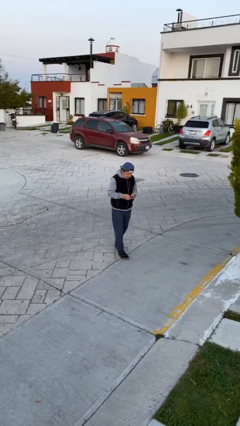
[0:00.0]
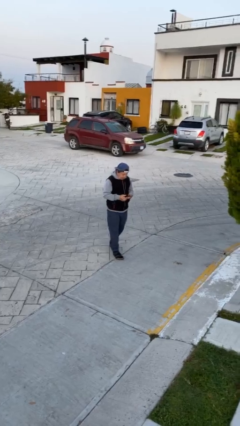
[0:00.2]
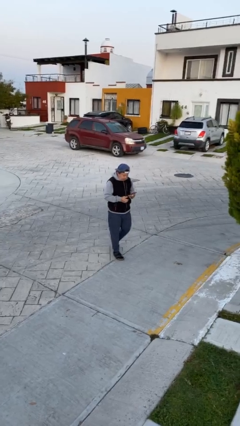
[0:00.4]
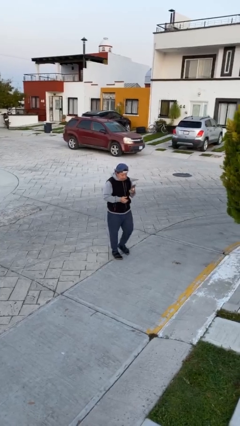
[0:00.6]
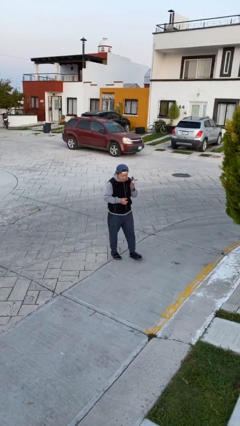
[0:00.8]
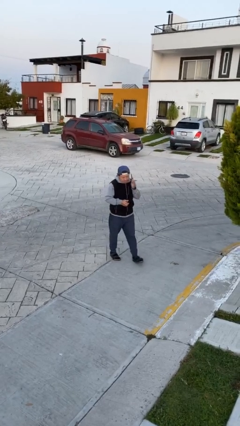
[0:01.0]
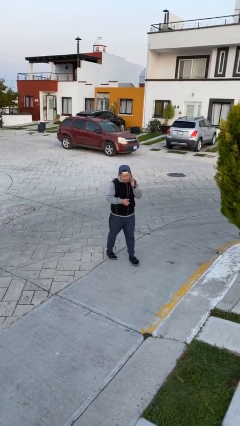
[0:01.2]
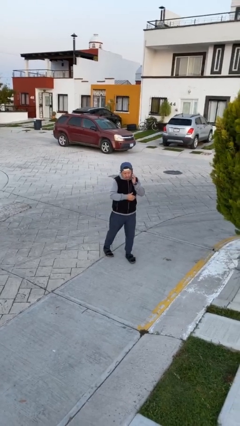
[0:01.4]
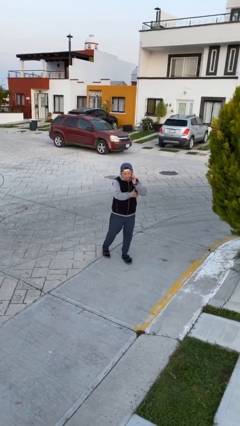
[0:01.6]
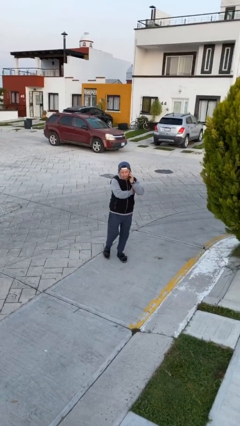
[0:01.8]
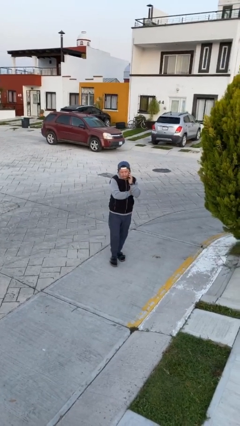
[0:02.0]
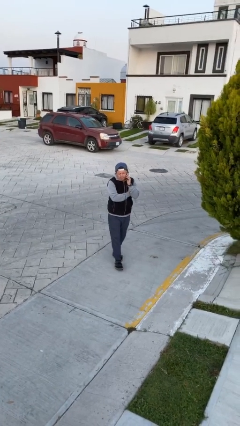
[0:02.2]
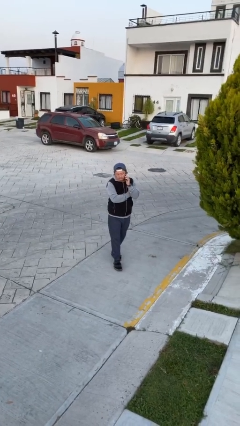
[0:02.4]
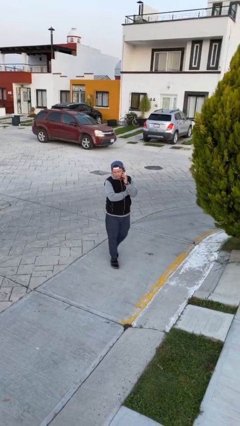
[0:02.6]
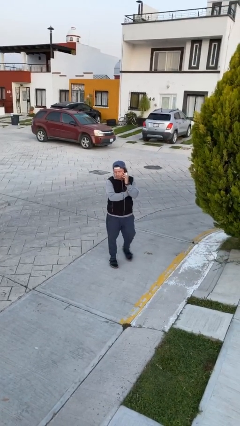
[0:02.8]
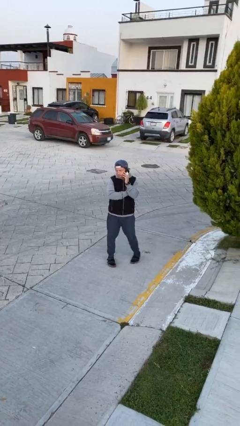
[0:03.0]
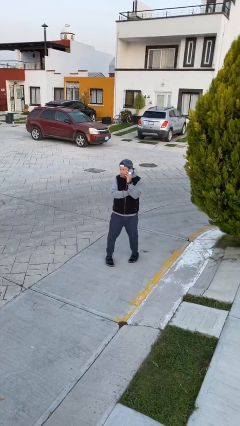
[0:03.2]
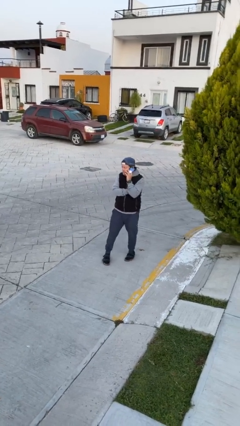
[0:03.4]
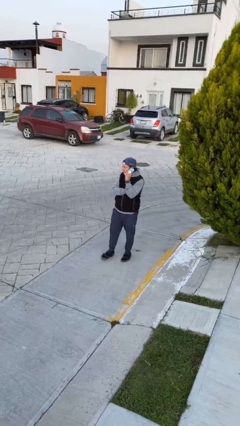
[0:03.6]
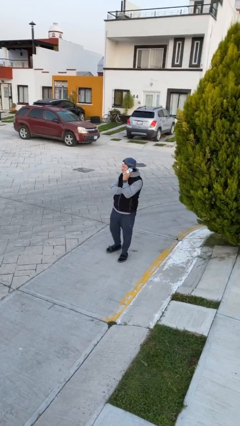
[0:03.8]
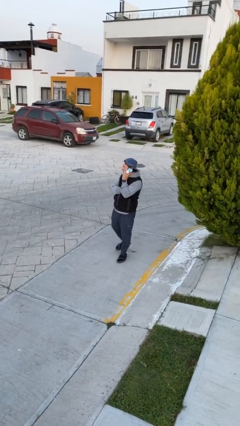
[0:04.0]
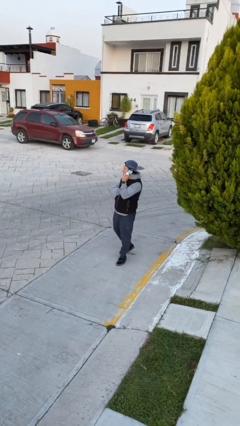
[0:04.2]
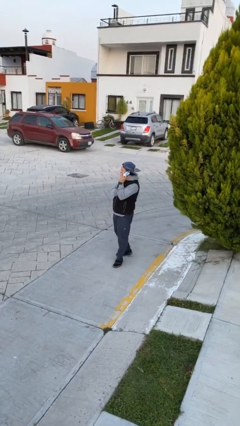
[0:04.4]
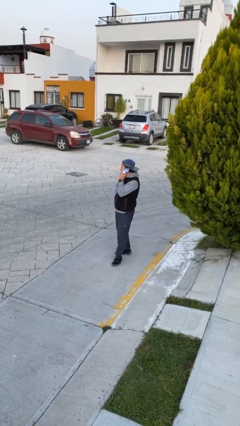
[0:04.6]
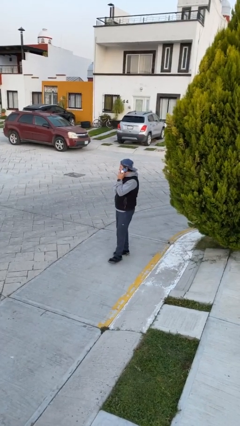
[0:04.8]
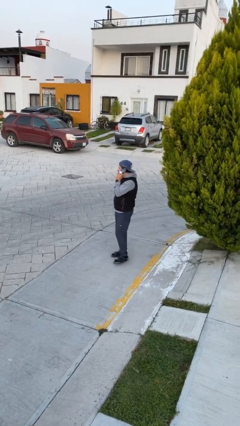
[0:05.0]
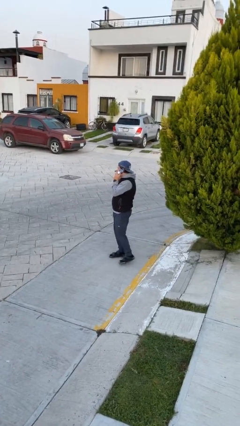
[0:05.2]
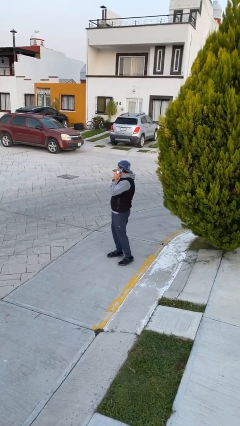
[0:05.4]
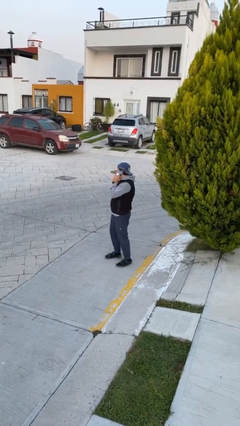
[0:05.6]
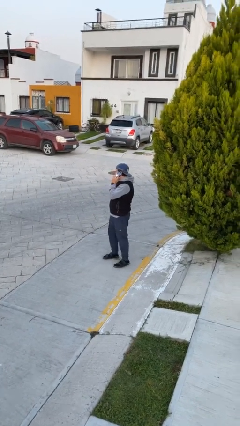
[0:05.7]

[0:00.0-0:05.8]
person talks on phone

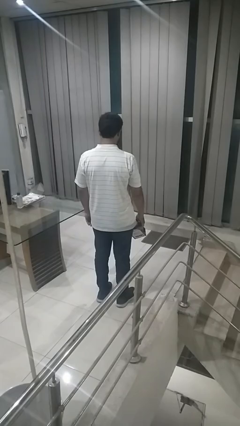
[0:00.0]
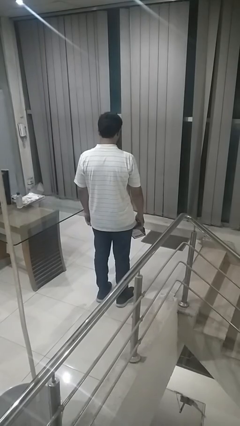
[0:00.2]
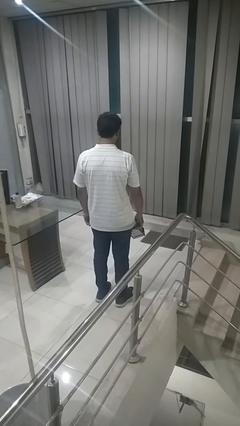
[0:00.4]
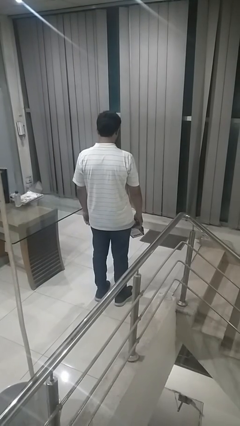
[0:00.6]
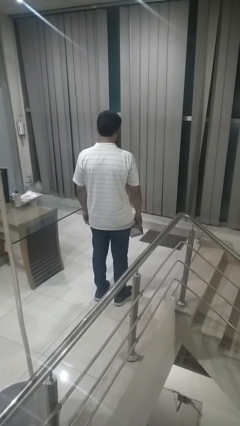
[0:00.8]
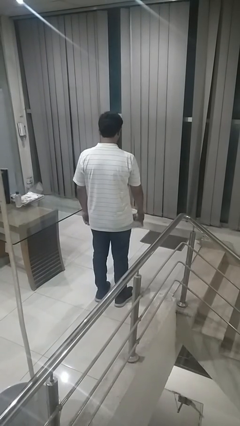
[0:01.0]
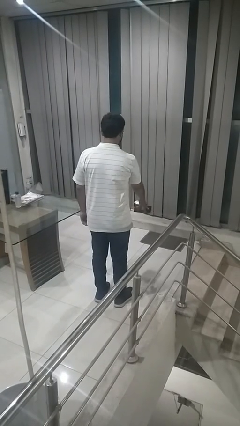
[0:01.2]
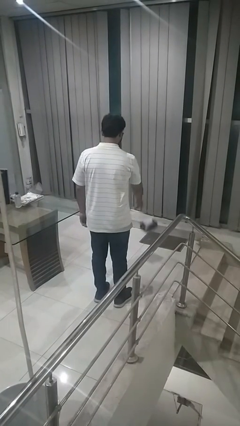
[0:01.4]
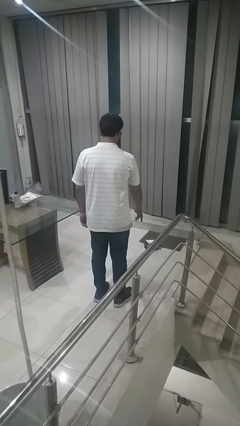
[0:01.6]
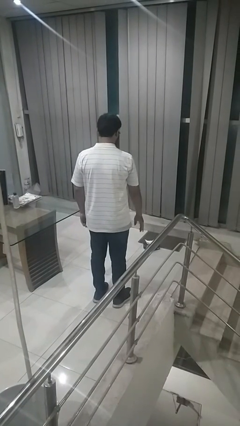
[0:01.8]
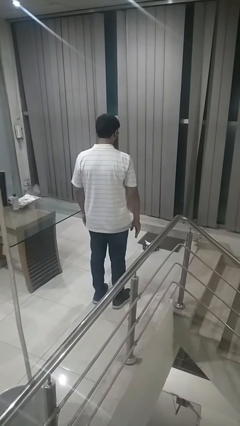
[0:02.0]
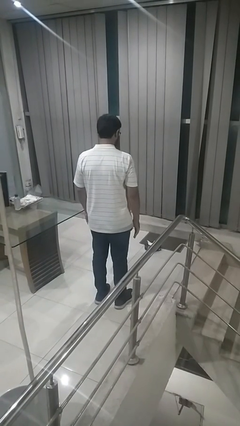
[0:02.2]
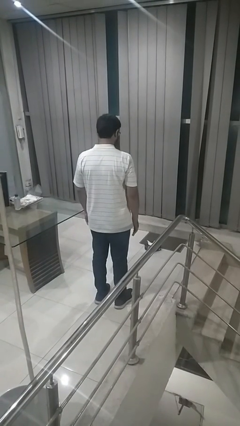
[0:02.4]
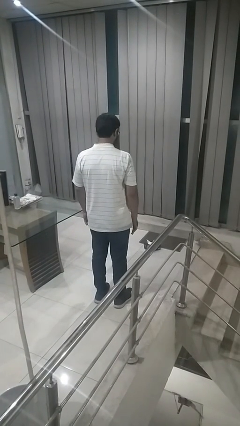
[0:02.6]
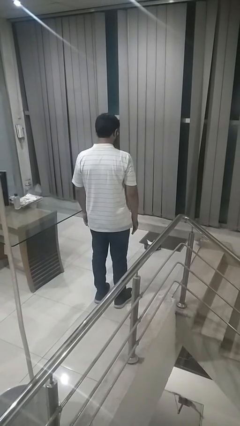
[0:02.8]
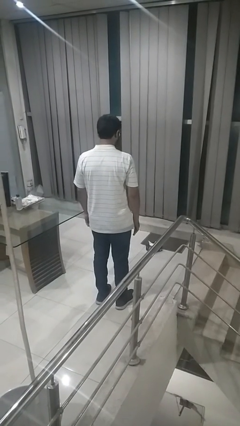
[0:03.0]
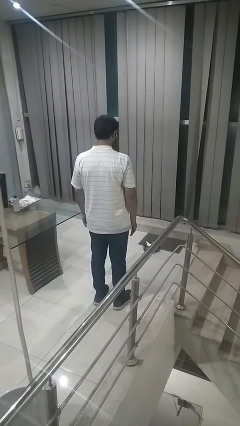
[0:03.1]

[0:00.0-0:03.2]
person throws object to ground

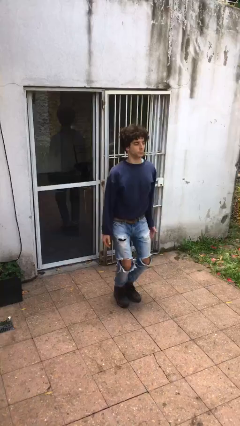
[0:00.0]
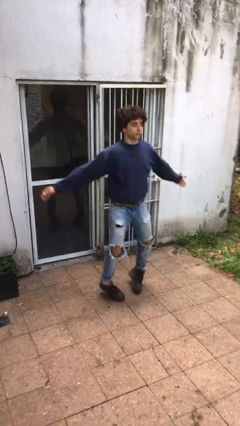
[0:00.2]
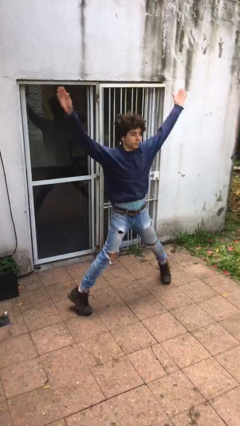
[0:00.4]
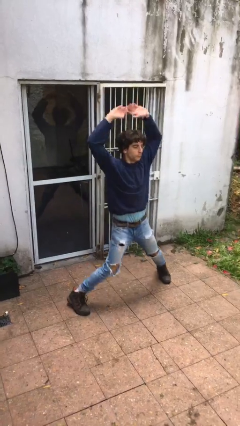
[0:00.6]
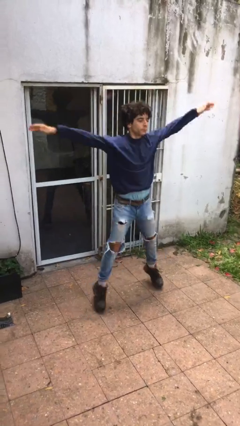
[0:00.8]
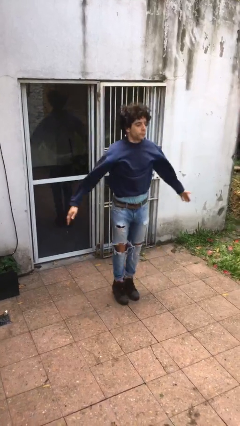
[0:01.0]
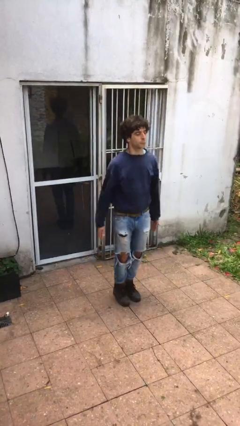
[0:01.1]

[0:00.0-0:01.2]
person exercises with jumping jacks

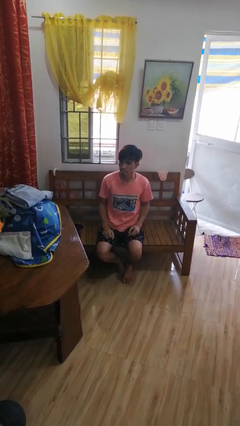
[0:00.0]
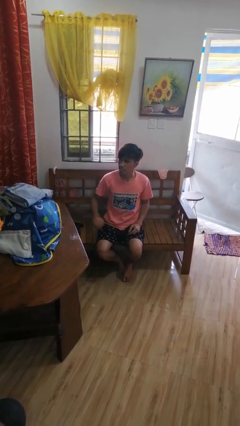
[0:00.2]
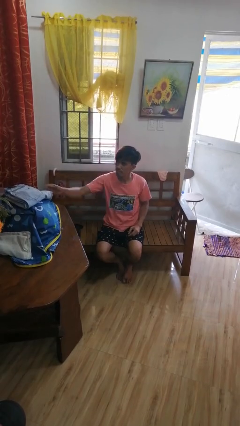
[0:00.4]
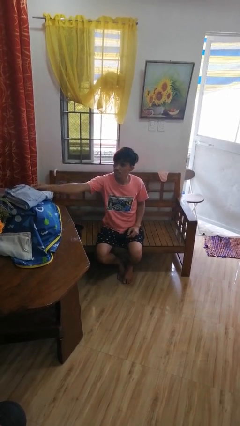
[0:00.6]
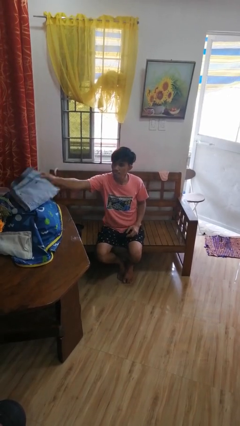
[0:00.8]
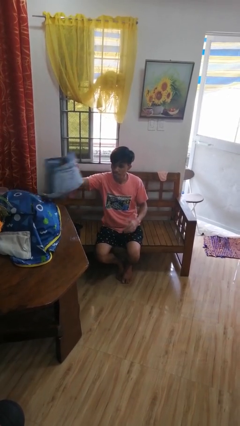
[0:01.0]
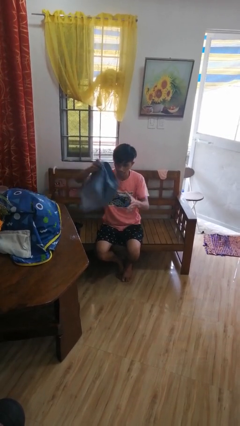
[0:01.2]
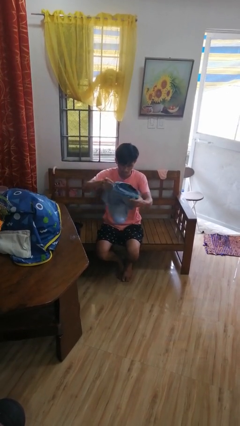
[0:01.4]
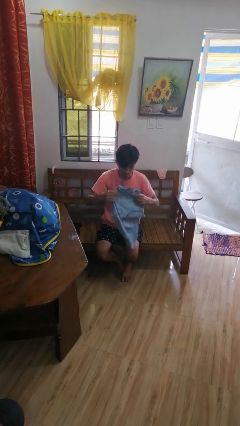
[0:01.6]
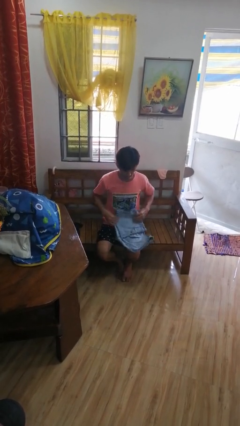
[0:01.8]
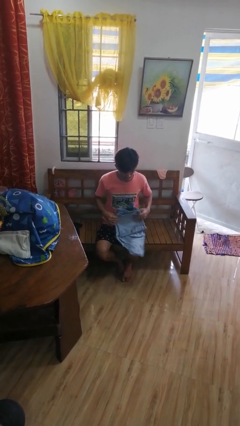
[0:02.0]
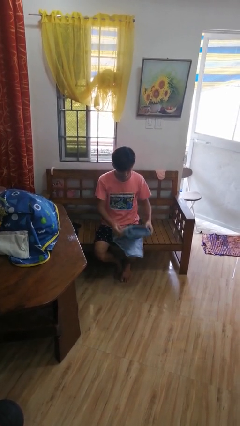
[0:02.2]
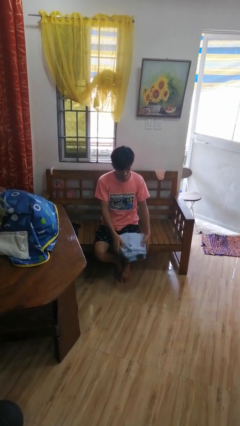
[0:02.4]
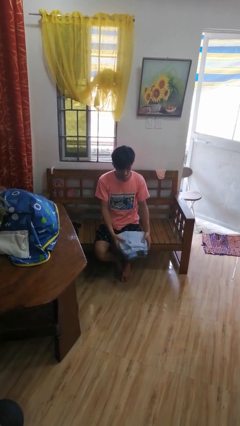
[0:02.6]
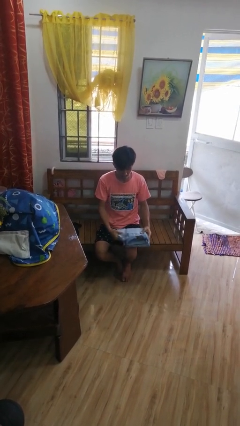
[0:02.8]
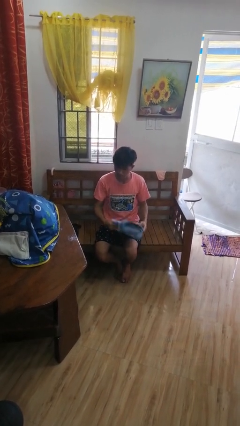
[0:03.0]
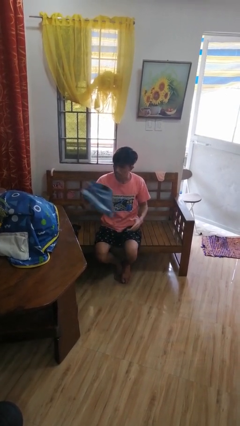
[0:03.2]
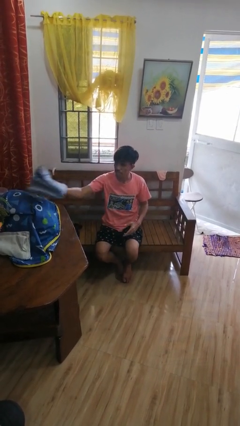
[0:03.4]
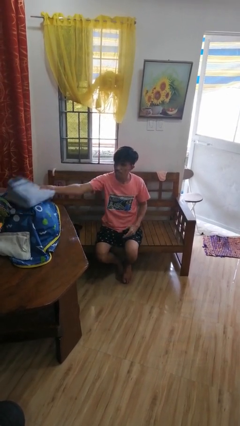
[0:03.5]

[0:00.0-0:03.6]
person folds pants

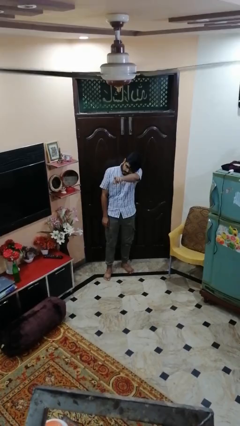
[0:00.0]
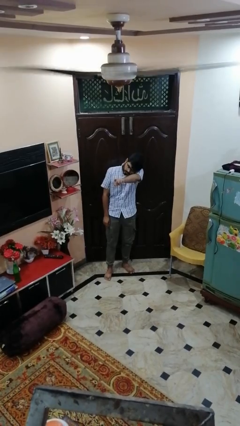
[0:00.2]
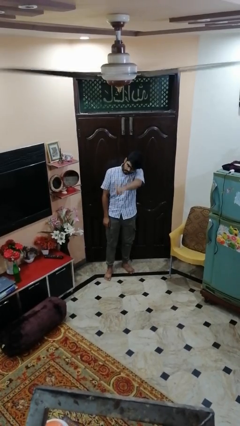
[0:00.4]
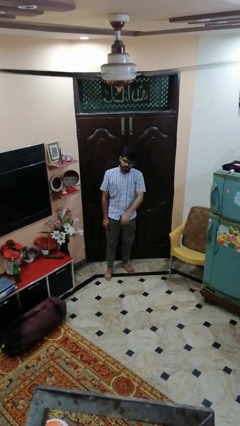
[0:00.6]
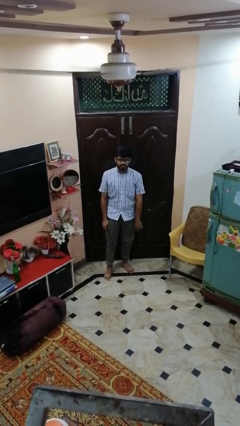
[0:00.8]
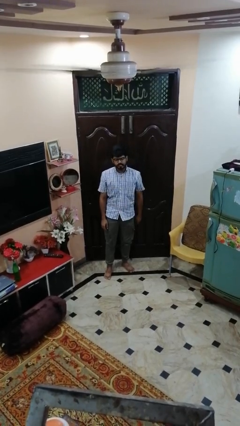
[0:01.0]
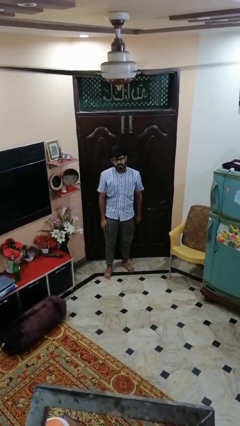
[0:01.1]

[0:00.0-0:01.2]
person points at person

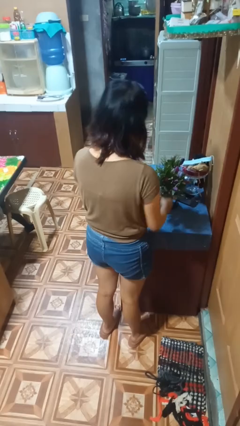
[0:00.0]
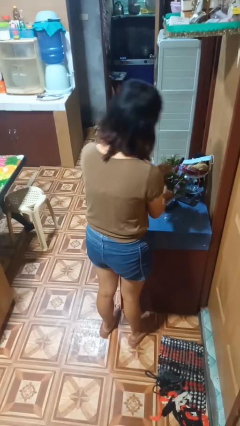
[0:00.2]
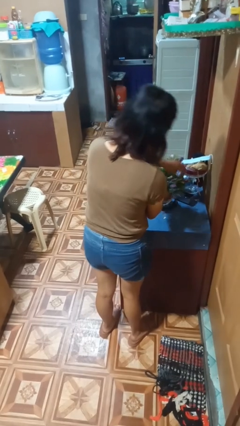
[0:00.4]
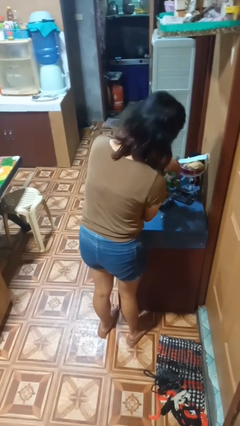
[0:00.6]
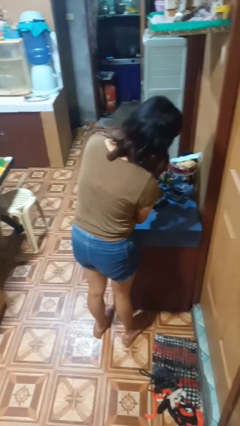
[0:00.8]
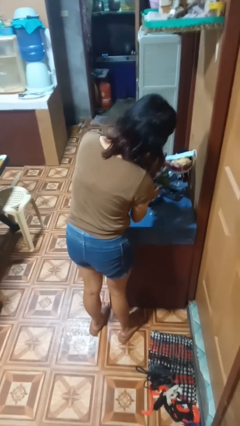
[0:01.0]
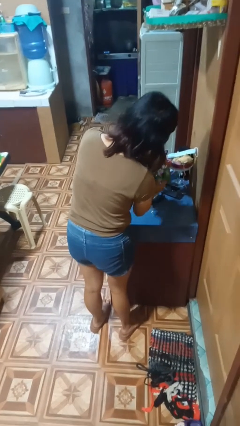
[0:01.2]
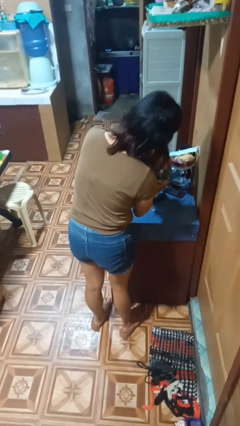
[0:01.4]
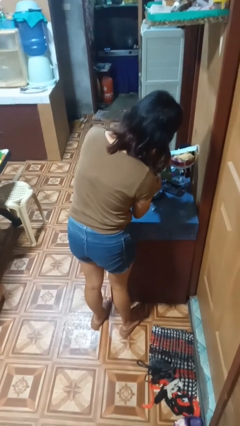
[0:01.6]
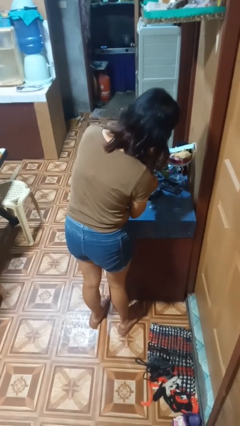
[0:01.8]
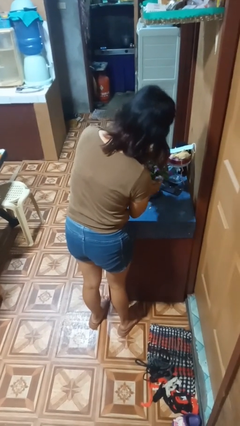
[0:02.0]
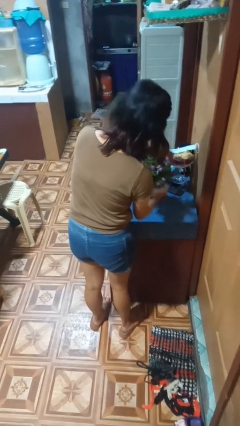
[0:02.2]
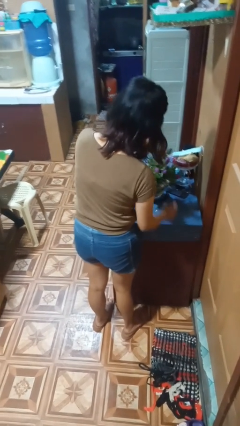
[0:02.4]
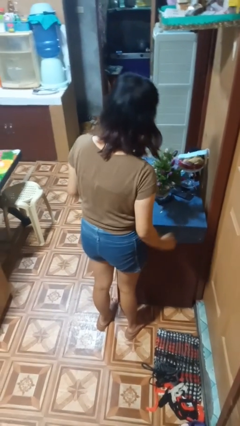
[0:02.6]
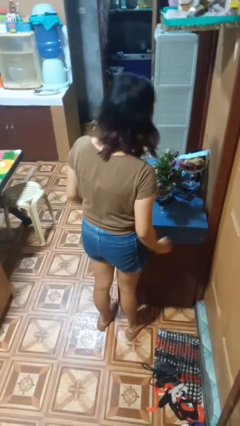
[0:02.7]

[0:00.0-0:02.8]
person arranges flowers in vase
